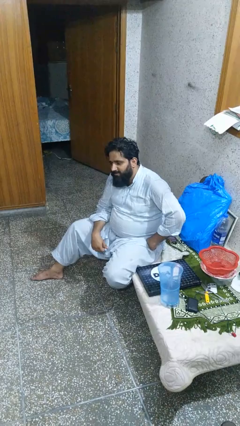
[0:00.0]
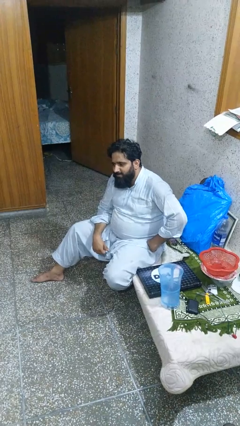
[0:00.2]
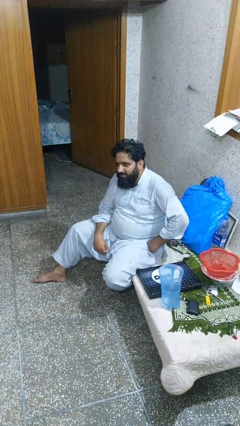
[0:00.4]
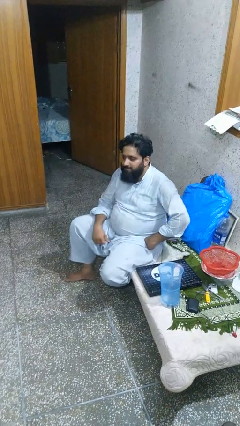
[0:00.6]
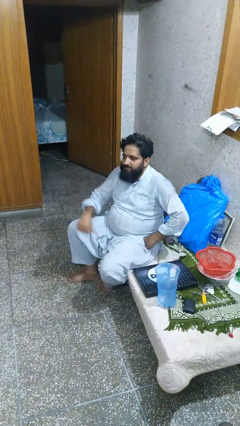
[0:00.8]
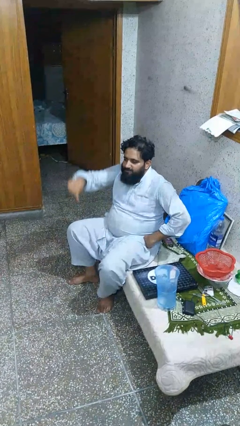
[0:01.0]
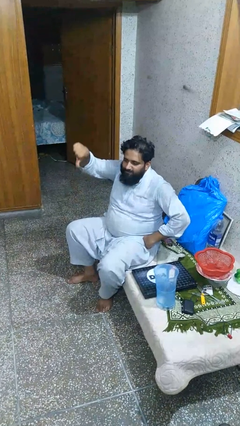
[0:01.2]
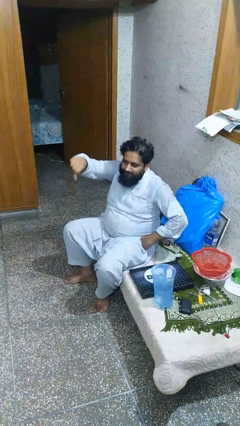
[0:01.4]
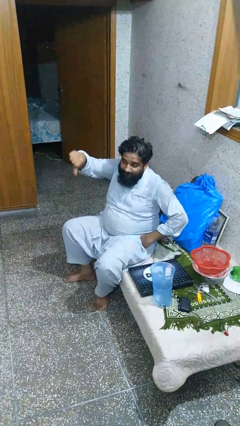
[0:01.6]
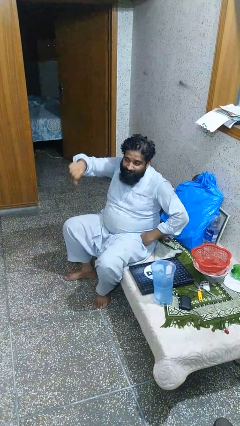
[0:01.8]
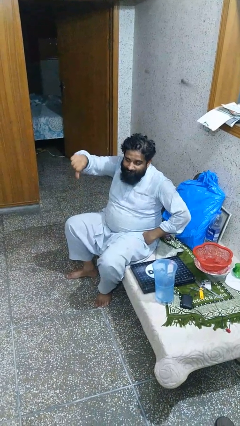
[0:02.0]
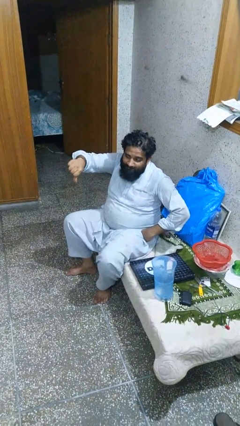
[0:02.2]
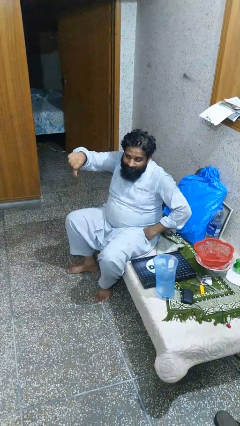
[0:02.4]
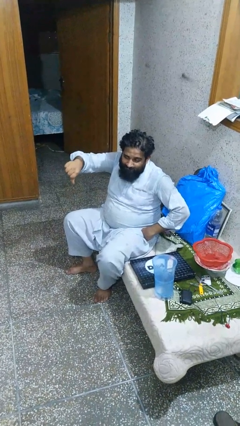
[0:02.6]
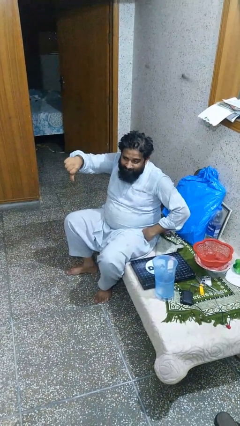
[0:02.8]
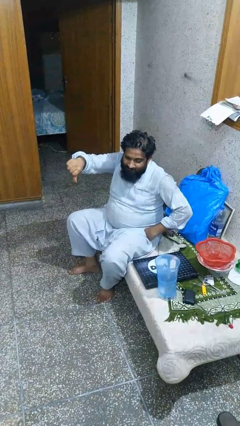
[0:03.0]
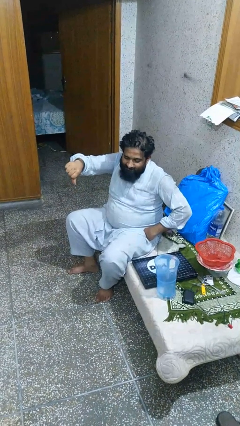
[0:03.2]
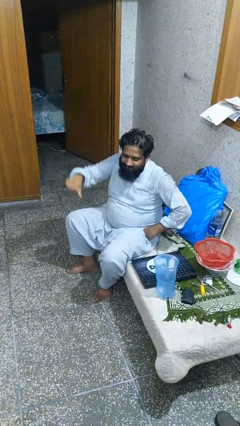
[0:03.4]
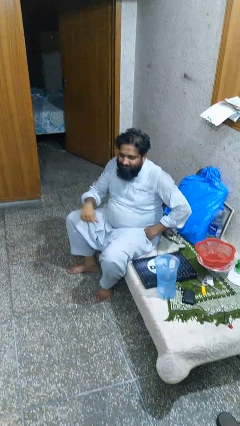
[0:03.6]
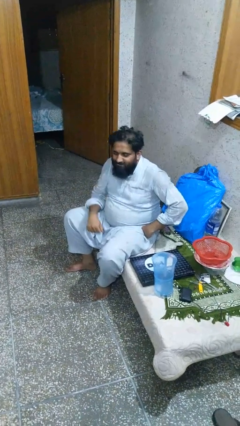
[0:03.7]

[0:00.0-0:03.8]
person gestures thumbs down

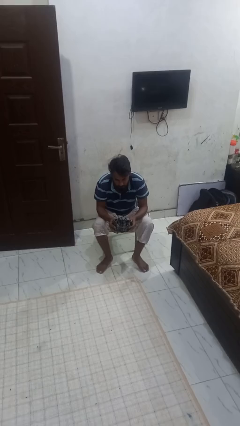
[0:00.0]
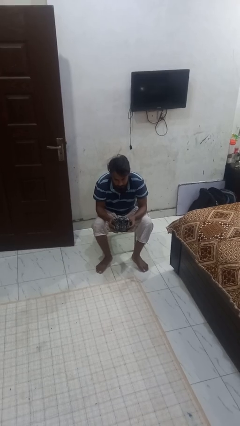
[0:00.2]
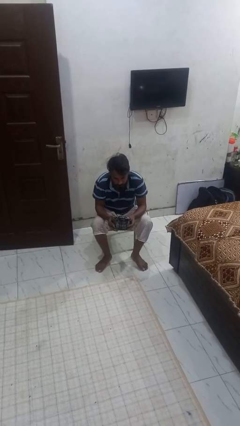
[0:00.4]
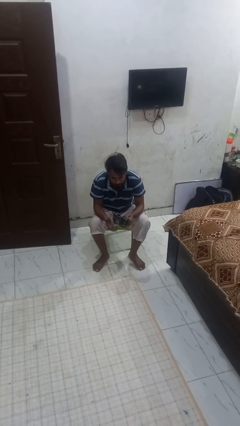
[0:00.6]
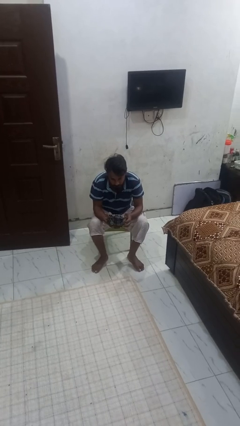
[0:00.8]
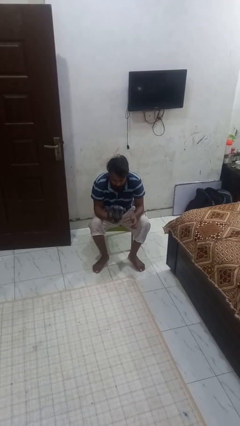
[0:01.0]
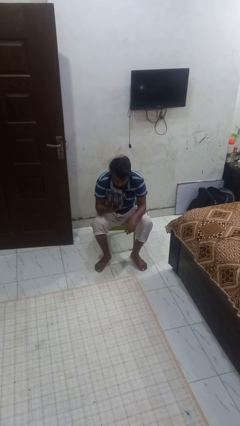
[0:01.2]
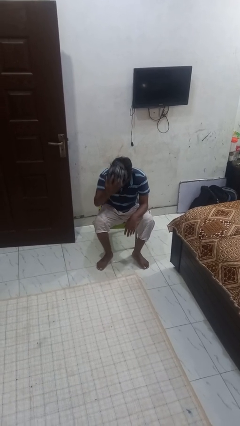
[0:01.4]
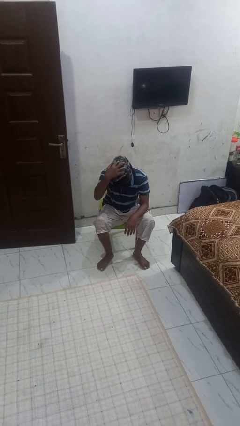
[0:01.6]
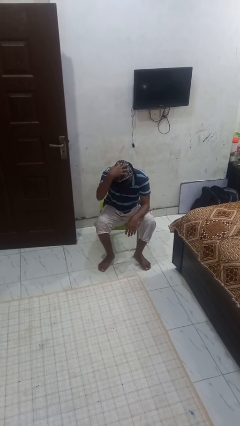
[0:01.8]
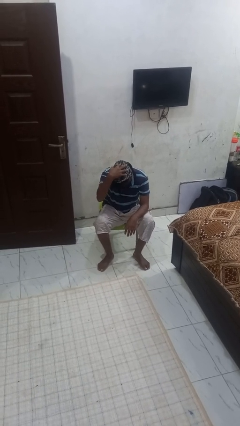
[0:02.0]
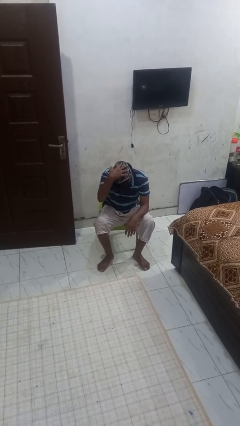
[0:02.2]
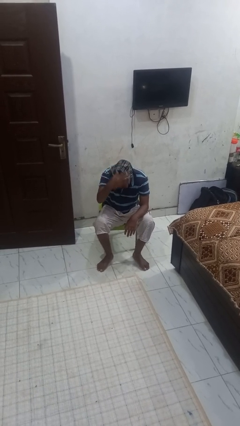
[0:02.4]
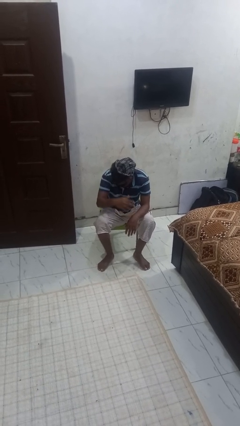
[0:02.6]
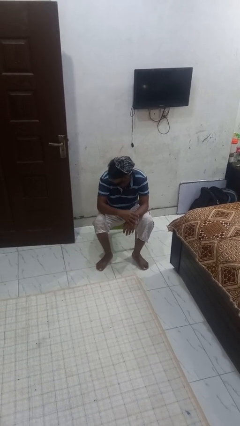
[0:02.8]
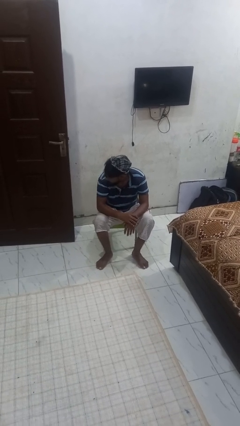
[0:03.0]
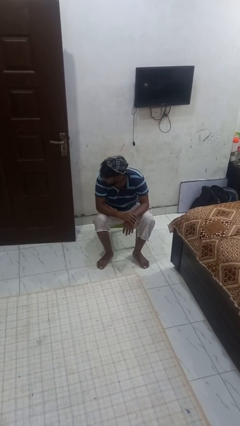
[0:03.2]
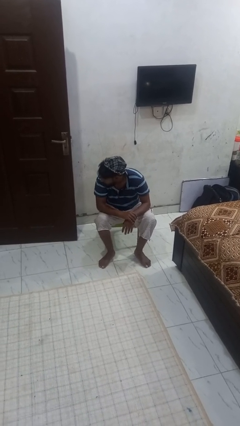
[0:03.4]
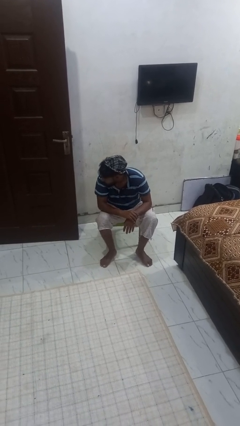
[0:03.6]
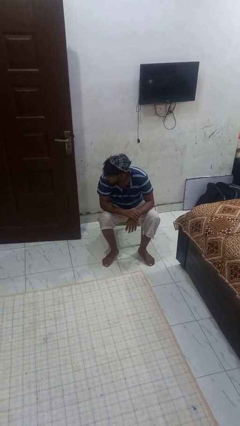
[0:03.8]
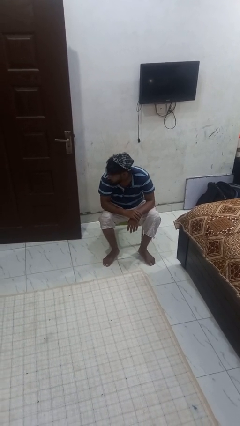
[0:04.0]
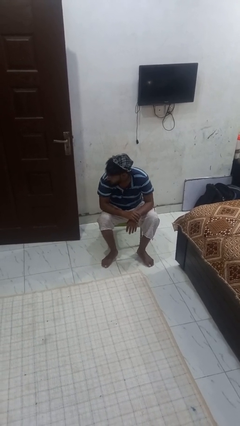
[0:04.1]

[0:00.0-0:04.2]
person puts on hat

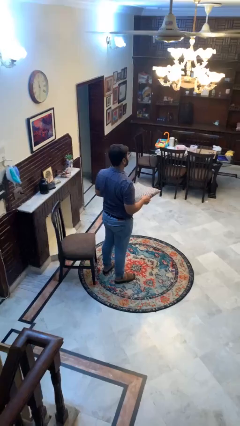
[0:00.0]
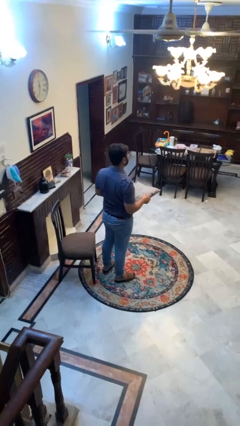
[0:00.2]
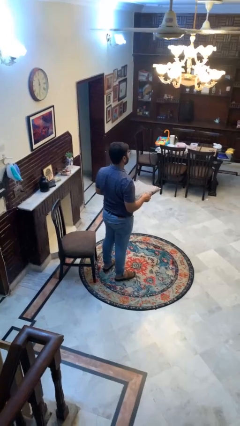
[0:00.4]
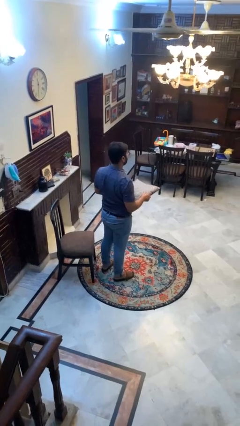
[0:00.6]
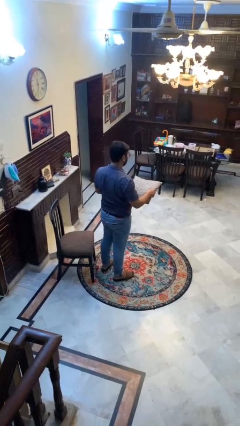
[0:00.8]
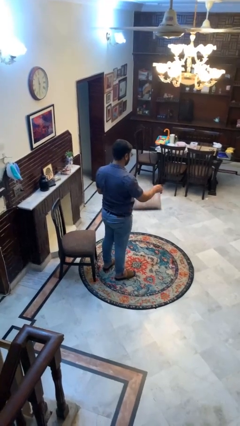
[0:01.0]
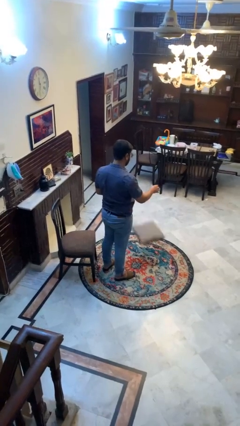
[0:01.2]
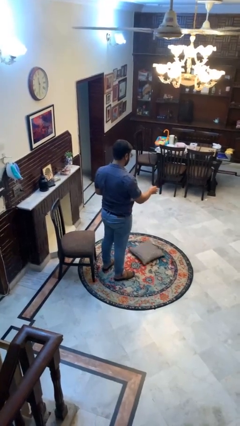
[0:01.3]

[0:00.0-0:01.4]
person drops object

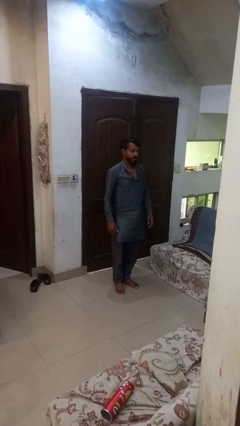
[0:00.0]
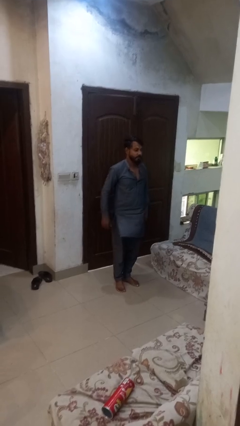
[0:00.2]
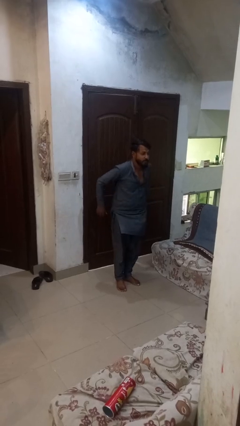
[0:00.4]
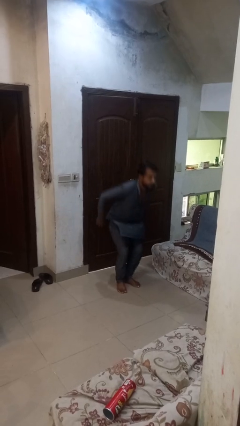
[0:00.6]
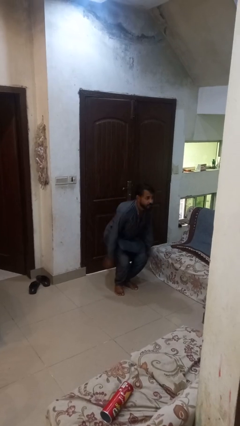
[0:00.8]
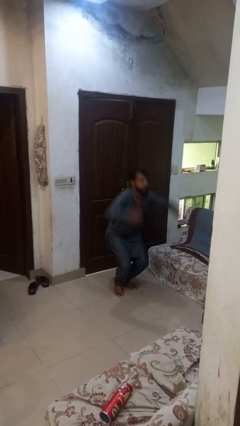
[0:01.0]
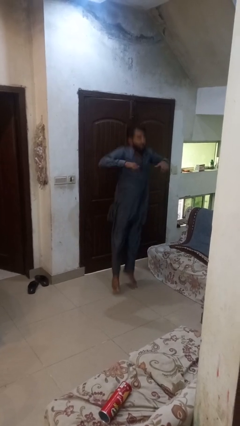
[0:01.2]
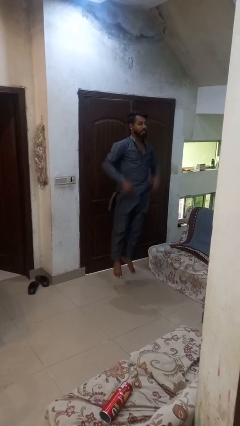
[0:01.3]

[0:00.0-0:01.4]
person jumps

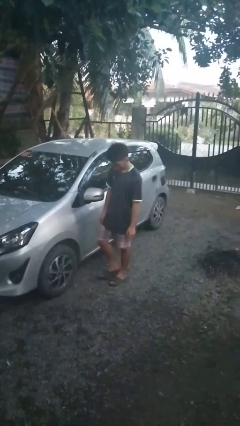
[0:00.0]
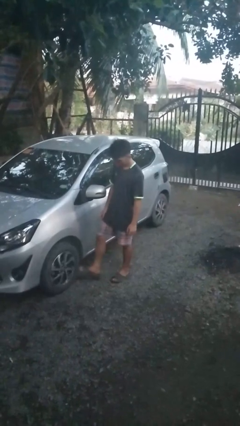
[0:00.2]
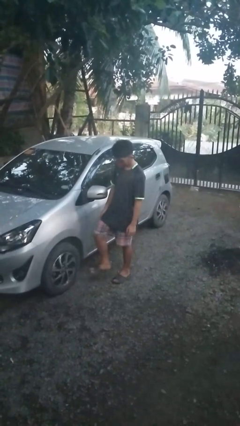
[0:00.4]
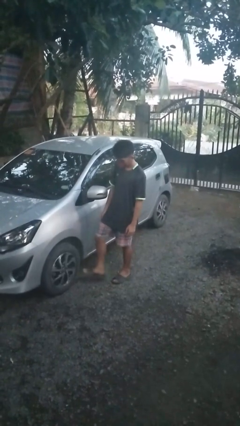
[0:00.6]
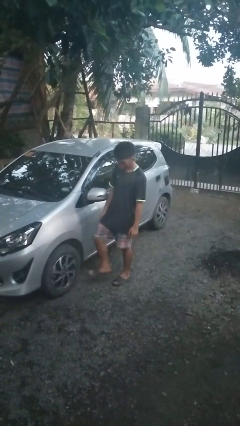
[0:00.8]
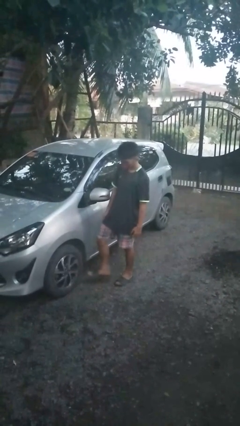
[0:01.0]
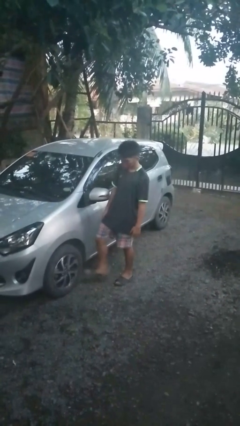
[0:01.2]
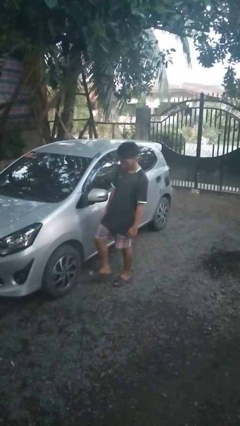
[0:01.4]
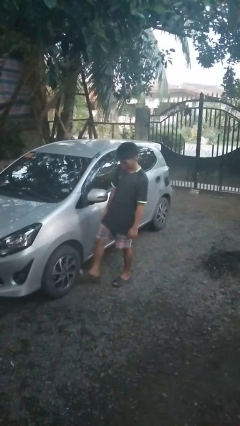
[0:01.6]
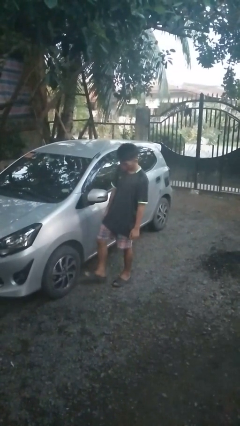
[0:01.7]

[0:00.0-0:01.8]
person kicks car tires

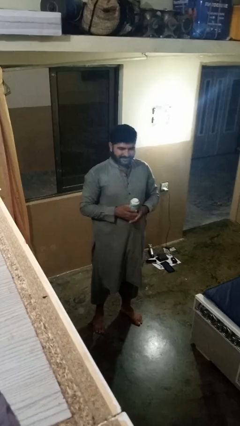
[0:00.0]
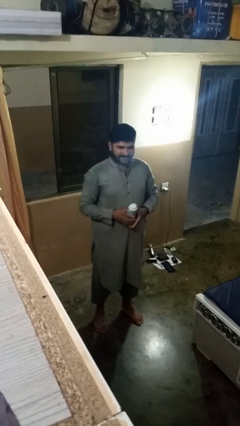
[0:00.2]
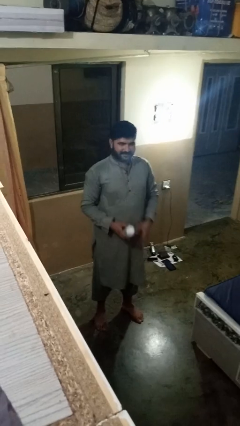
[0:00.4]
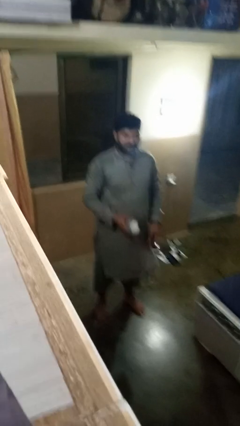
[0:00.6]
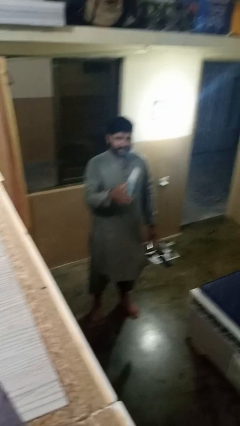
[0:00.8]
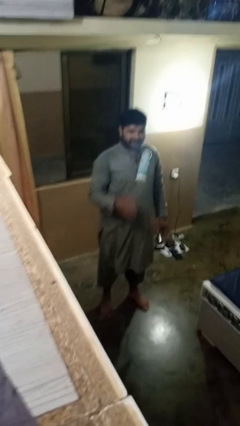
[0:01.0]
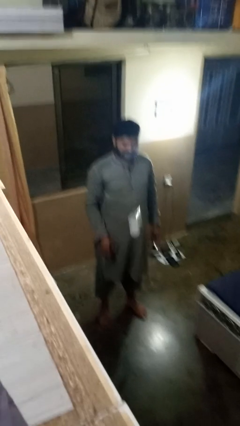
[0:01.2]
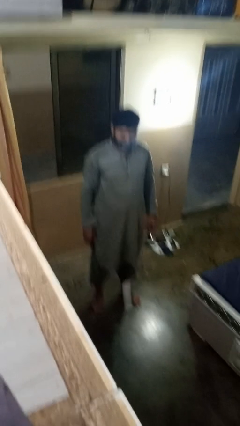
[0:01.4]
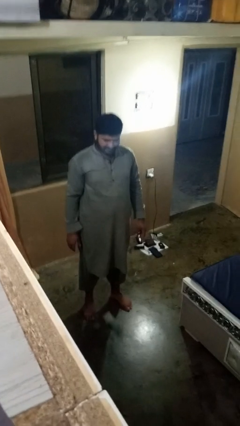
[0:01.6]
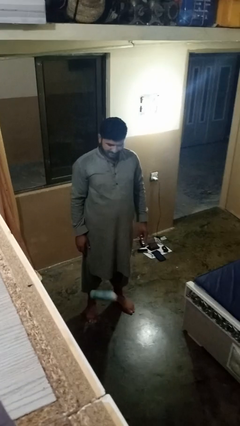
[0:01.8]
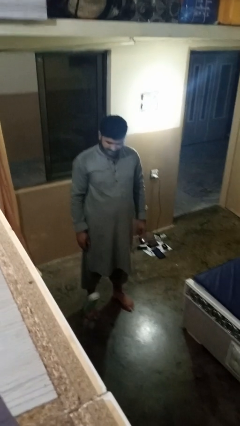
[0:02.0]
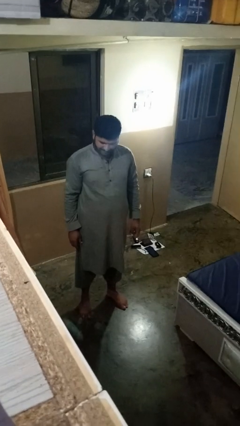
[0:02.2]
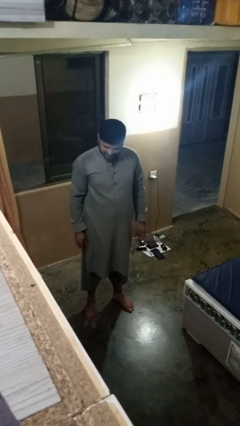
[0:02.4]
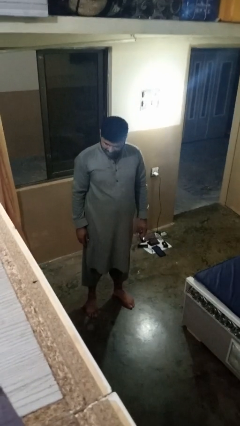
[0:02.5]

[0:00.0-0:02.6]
person throws object into air

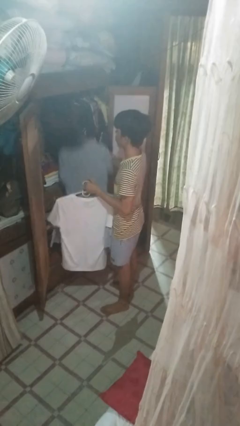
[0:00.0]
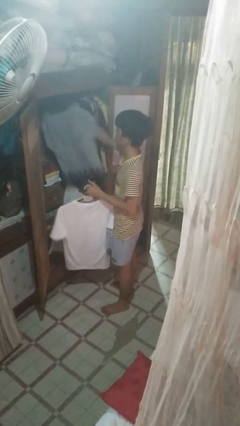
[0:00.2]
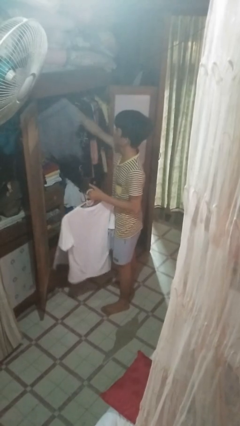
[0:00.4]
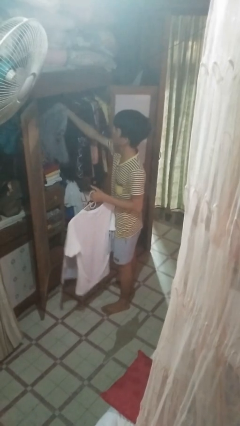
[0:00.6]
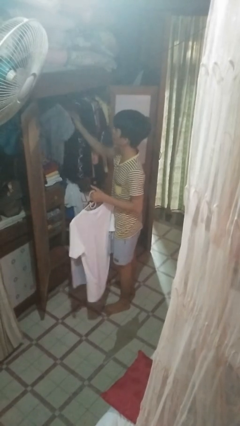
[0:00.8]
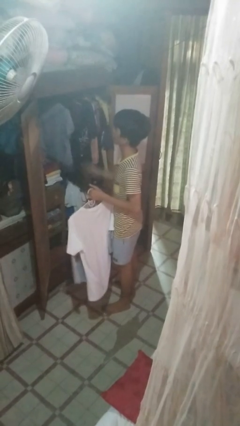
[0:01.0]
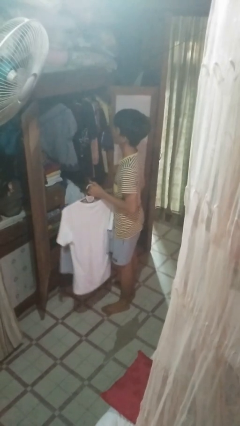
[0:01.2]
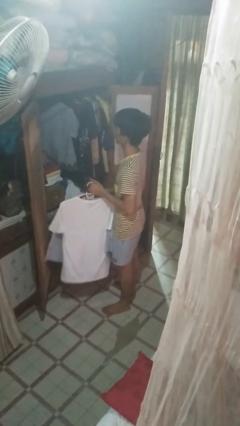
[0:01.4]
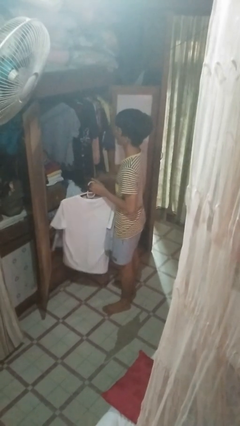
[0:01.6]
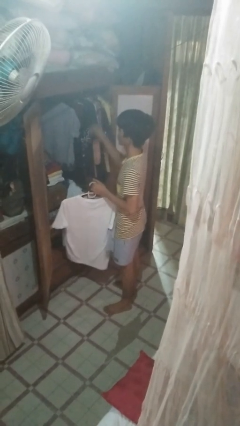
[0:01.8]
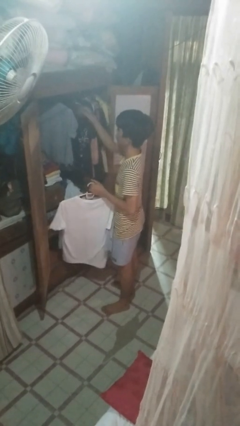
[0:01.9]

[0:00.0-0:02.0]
person puts clothes into closet
